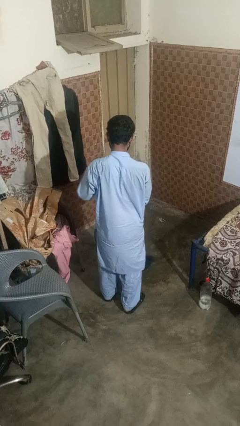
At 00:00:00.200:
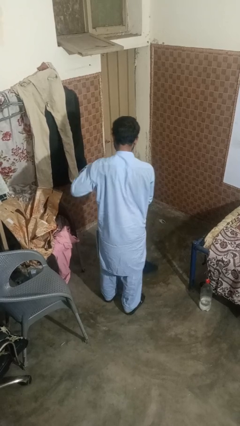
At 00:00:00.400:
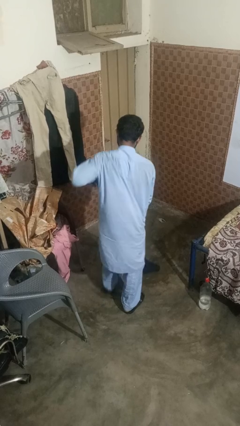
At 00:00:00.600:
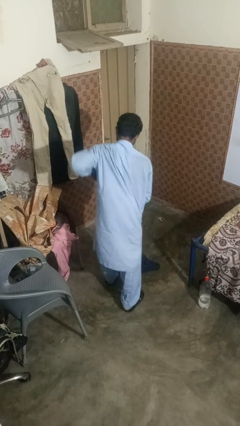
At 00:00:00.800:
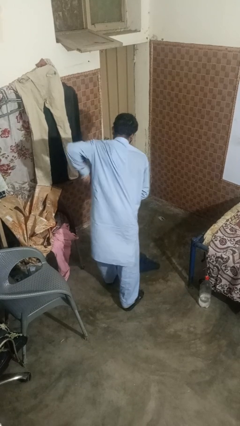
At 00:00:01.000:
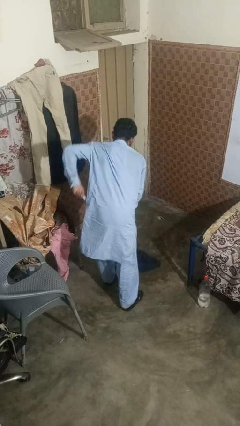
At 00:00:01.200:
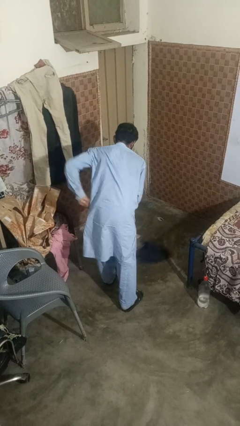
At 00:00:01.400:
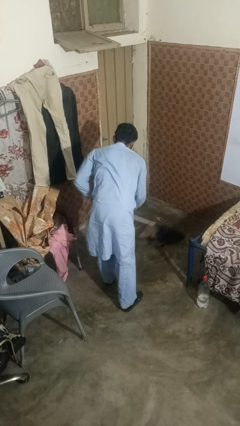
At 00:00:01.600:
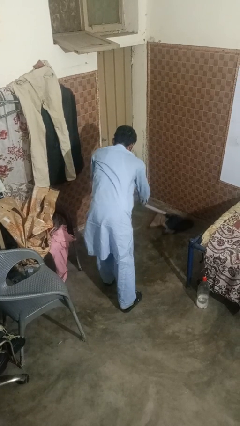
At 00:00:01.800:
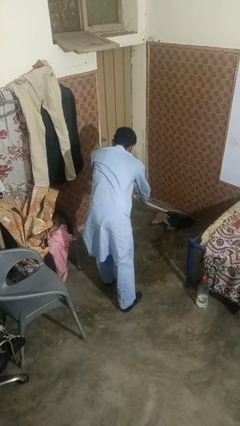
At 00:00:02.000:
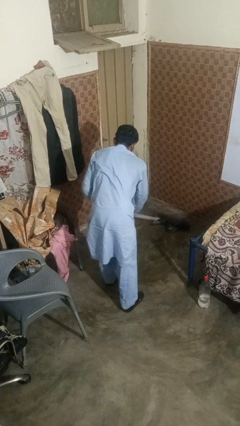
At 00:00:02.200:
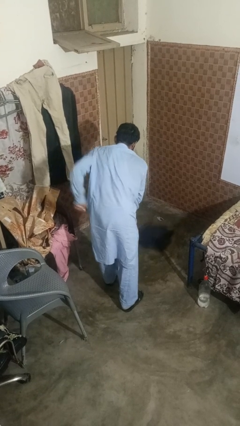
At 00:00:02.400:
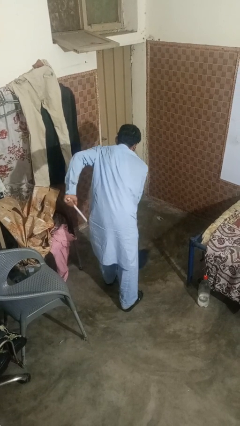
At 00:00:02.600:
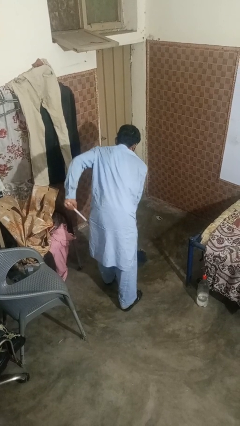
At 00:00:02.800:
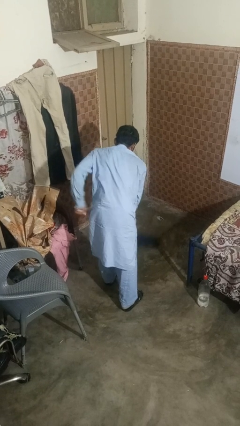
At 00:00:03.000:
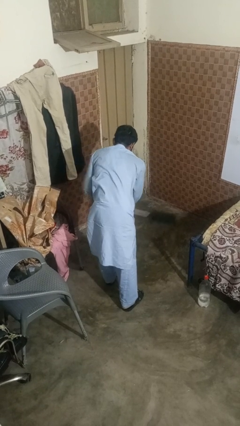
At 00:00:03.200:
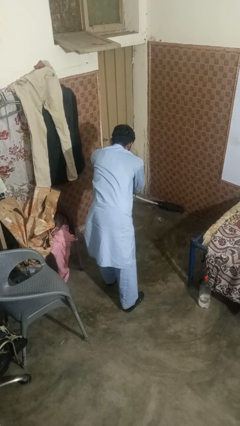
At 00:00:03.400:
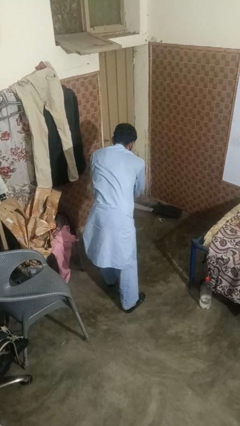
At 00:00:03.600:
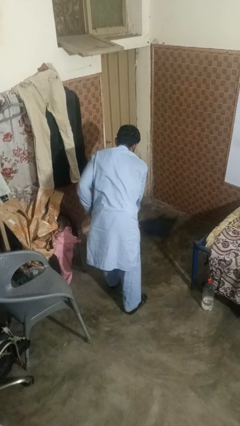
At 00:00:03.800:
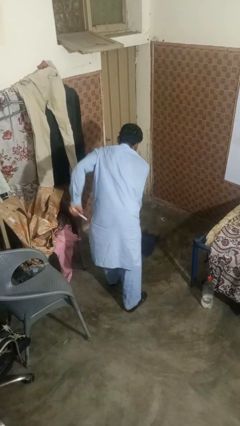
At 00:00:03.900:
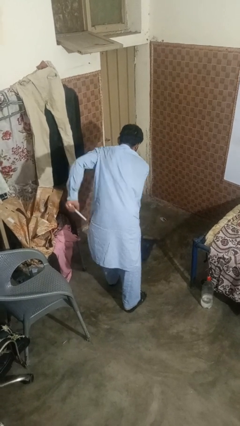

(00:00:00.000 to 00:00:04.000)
person mops

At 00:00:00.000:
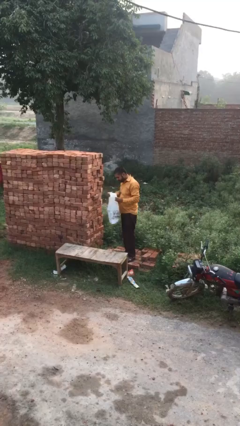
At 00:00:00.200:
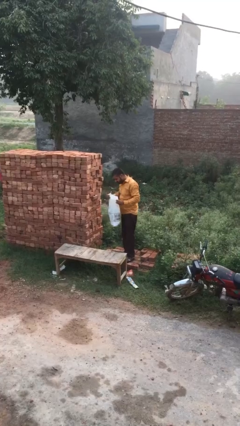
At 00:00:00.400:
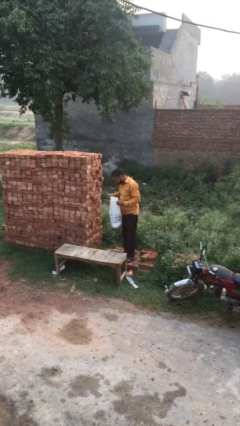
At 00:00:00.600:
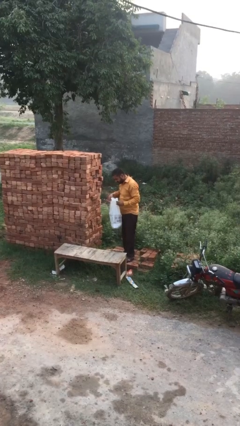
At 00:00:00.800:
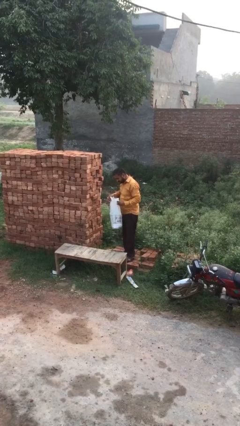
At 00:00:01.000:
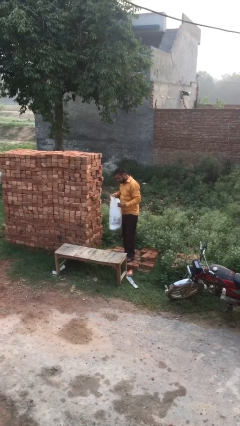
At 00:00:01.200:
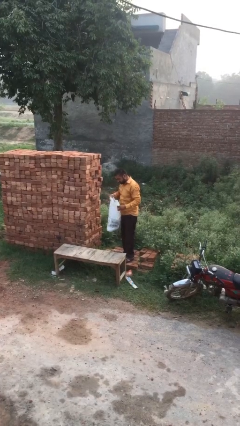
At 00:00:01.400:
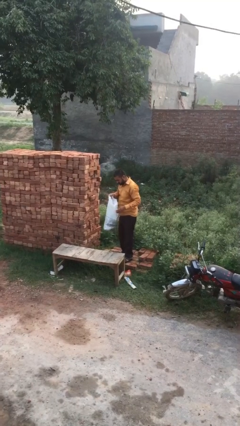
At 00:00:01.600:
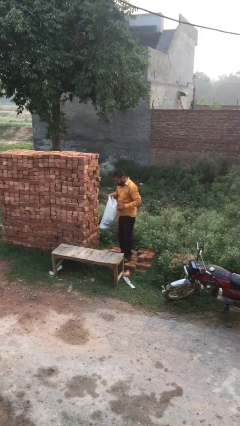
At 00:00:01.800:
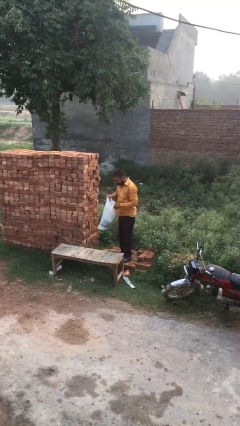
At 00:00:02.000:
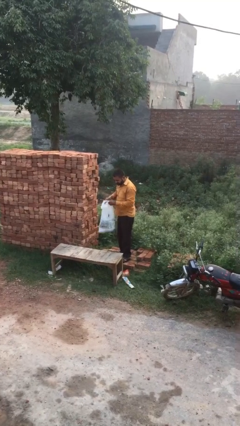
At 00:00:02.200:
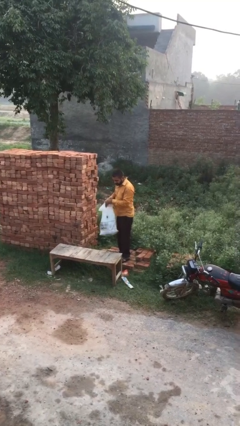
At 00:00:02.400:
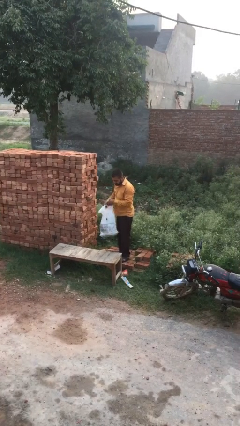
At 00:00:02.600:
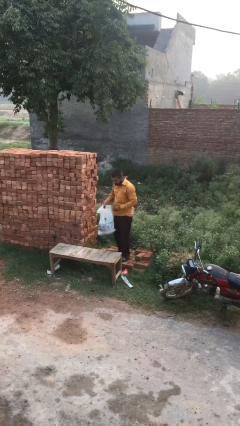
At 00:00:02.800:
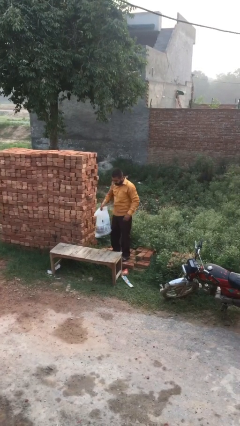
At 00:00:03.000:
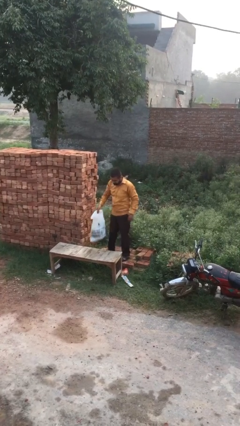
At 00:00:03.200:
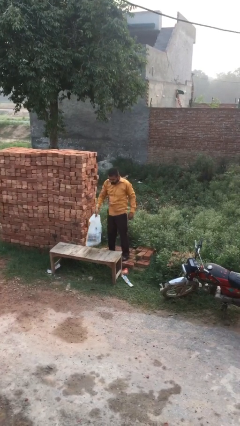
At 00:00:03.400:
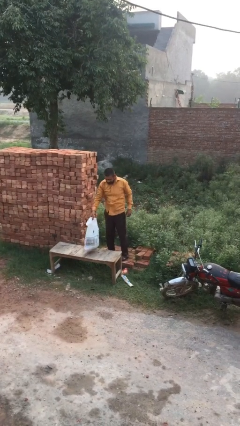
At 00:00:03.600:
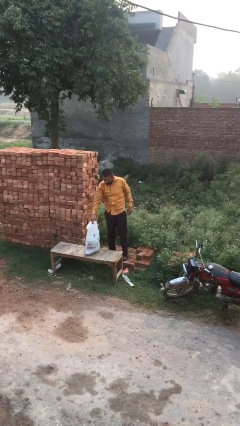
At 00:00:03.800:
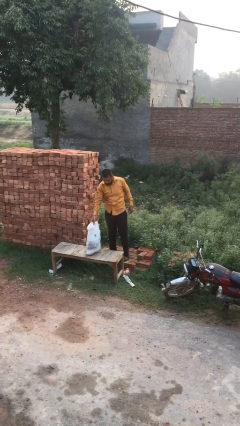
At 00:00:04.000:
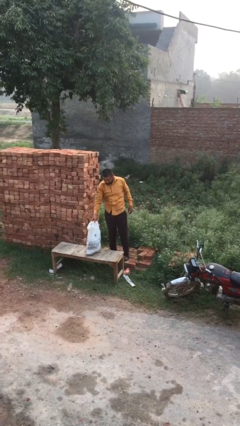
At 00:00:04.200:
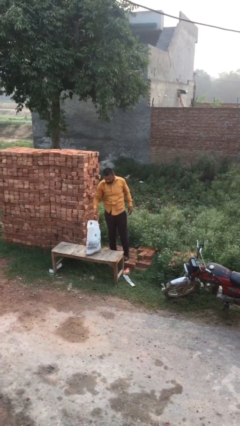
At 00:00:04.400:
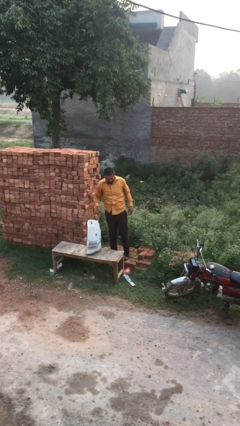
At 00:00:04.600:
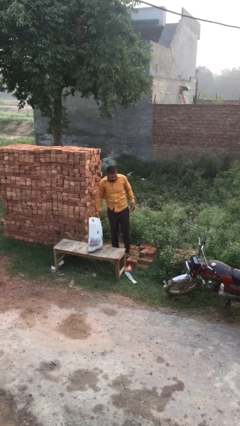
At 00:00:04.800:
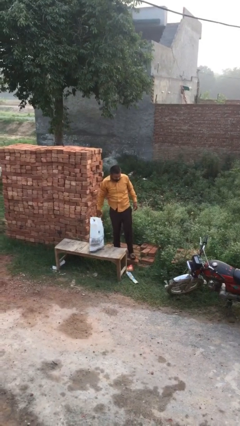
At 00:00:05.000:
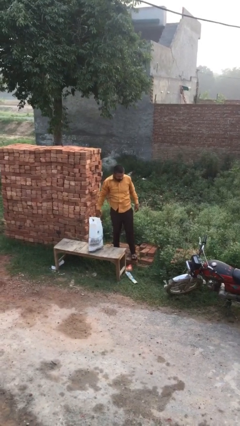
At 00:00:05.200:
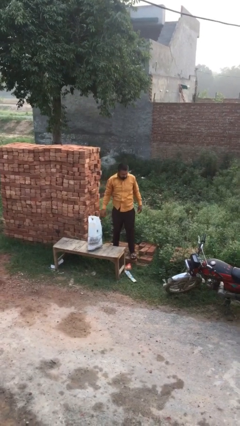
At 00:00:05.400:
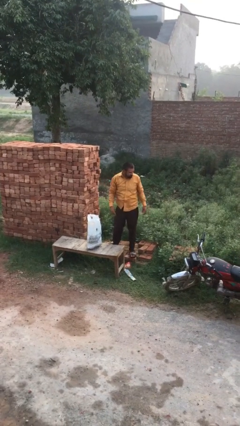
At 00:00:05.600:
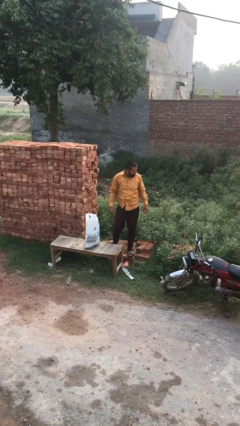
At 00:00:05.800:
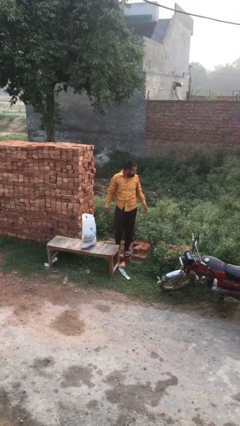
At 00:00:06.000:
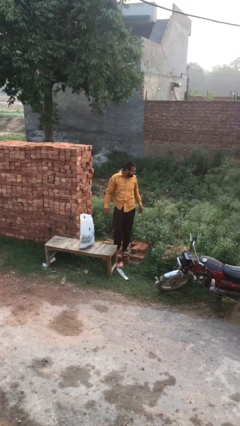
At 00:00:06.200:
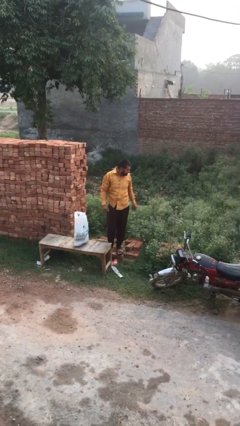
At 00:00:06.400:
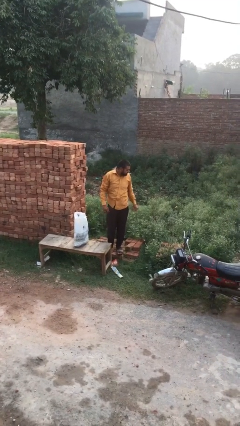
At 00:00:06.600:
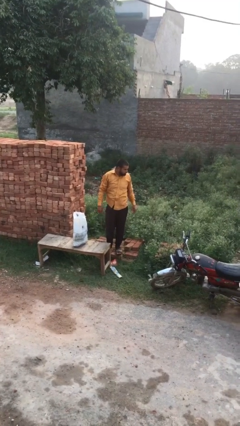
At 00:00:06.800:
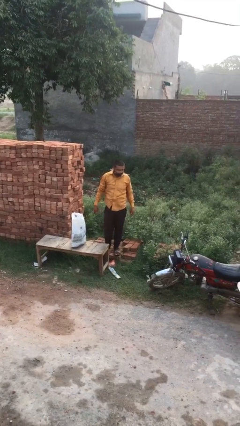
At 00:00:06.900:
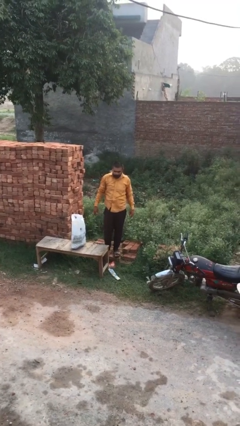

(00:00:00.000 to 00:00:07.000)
person puts down object on table

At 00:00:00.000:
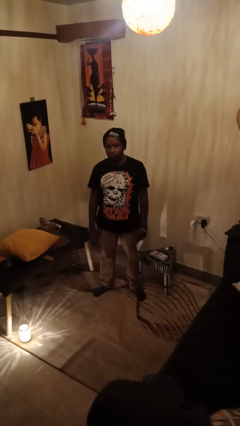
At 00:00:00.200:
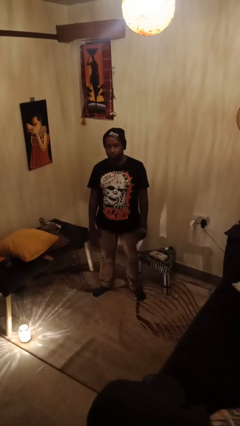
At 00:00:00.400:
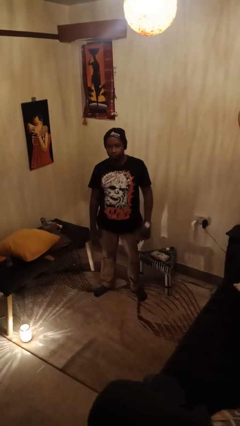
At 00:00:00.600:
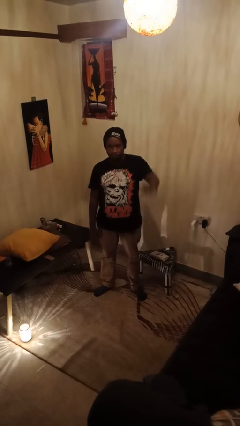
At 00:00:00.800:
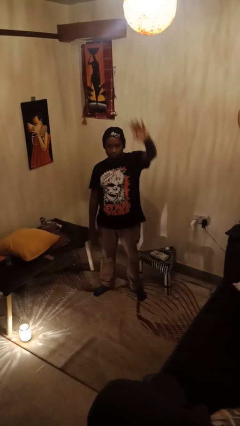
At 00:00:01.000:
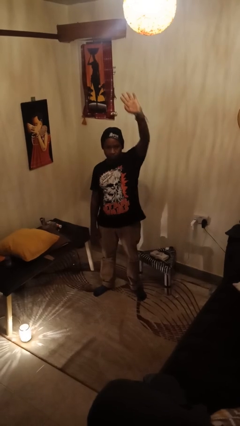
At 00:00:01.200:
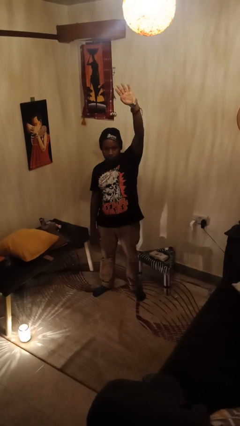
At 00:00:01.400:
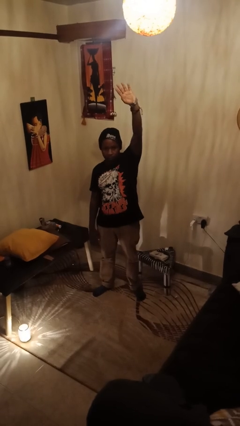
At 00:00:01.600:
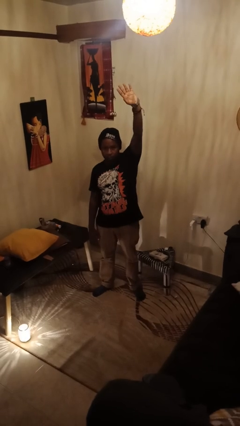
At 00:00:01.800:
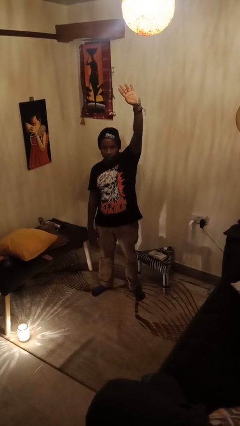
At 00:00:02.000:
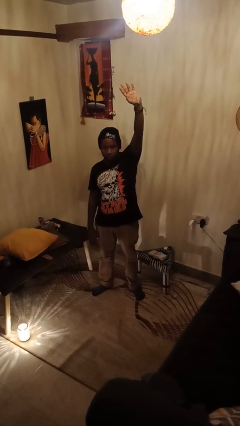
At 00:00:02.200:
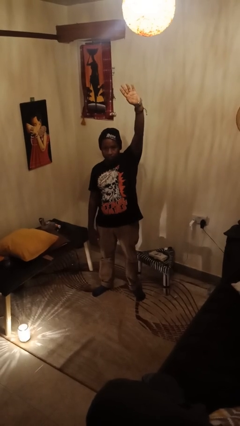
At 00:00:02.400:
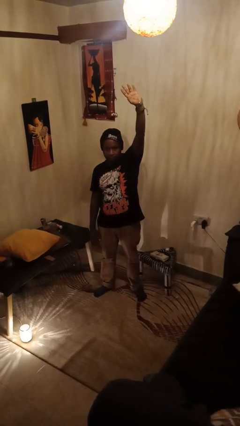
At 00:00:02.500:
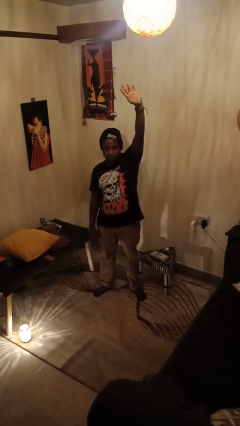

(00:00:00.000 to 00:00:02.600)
person gestures raise hand

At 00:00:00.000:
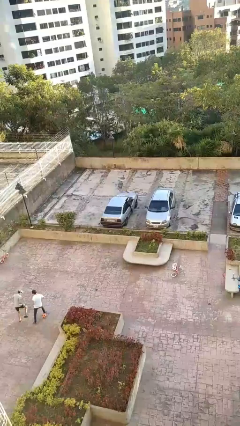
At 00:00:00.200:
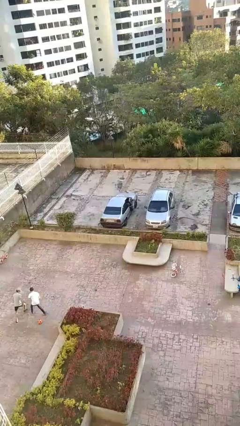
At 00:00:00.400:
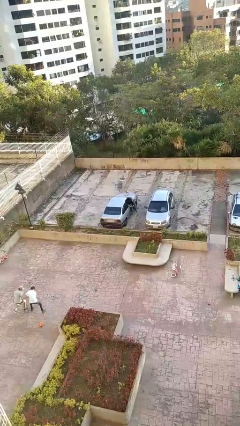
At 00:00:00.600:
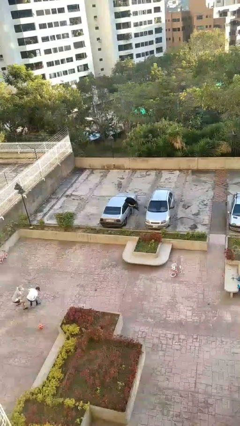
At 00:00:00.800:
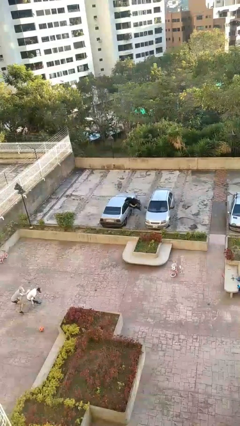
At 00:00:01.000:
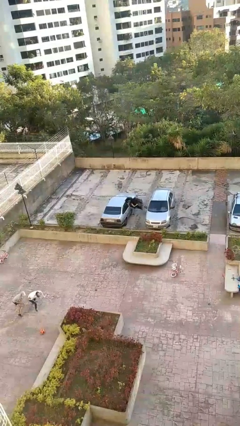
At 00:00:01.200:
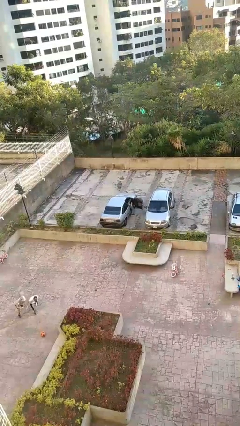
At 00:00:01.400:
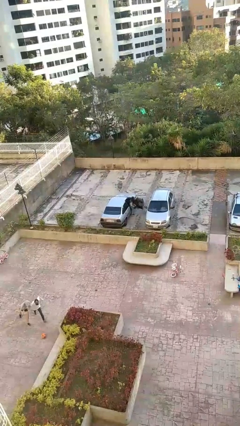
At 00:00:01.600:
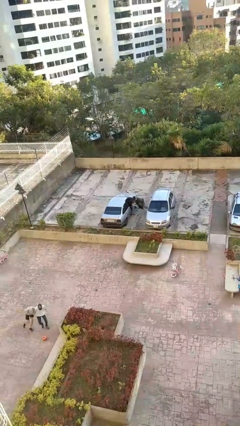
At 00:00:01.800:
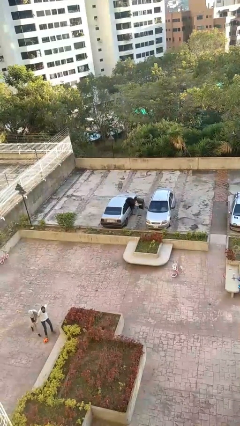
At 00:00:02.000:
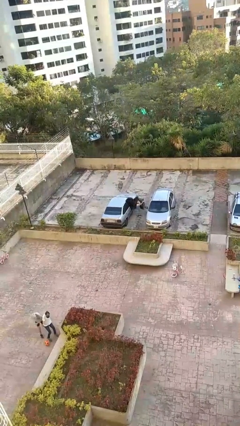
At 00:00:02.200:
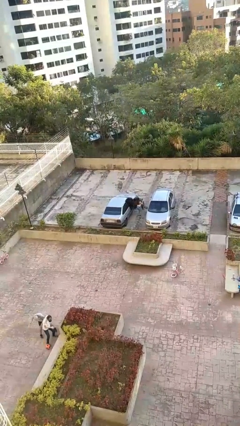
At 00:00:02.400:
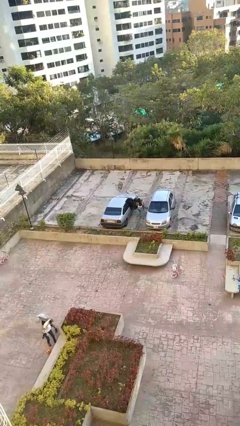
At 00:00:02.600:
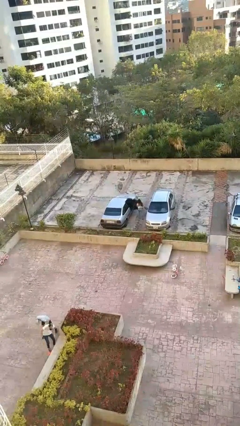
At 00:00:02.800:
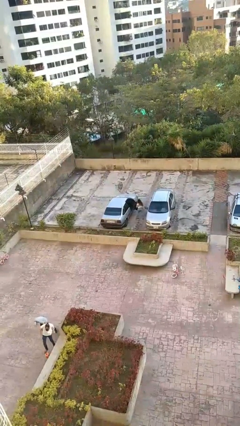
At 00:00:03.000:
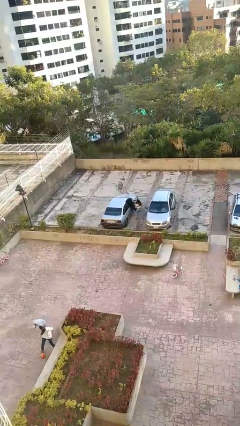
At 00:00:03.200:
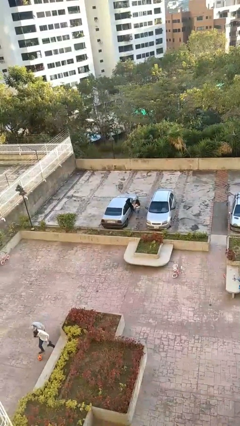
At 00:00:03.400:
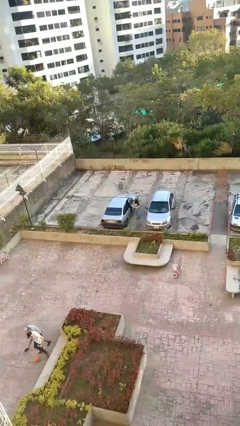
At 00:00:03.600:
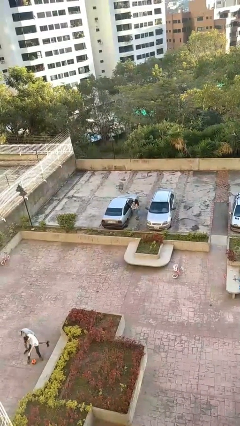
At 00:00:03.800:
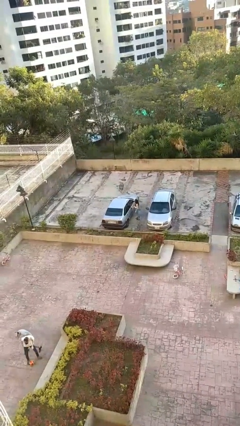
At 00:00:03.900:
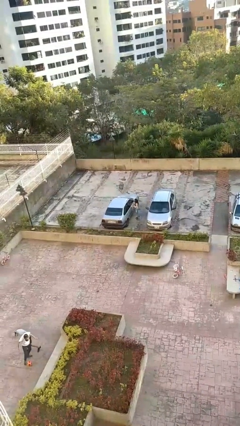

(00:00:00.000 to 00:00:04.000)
car drops off person
